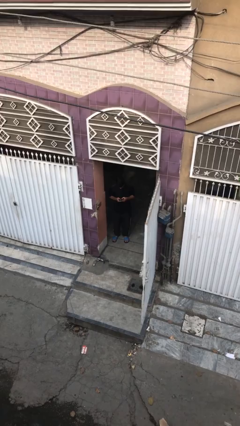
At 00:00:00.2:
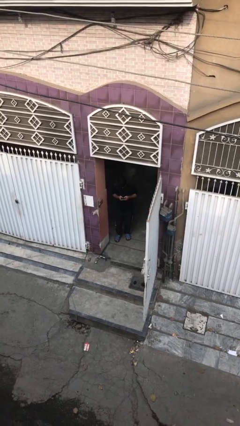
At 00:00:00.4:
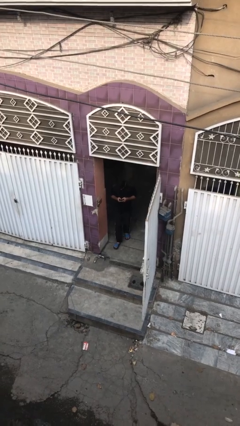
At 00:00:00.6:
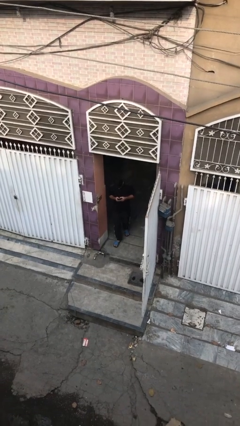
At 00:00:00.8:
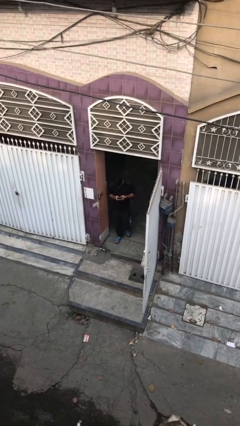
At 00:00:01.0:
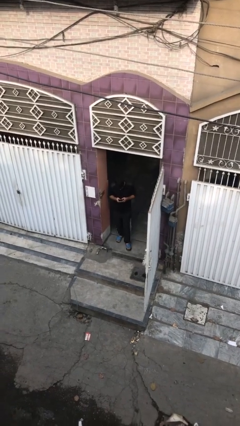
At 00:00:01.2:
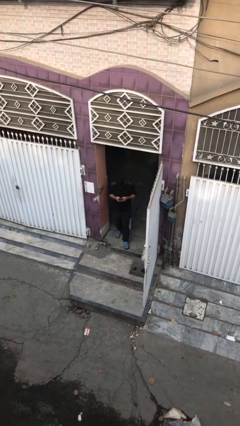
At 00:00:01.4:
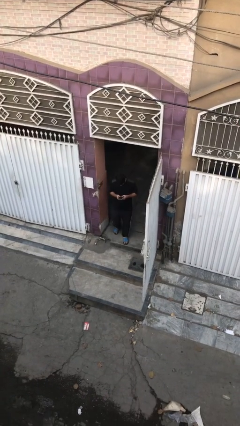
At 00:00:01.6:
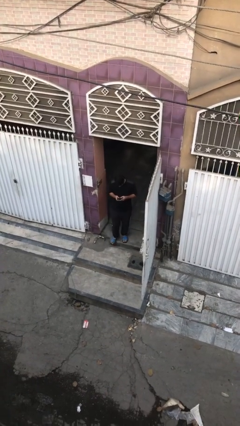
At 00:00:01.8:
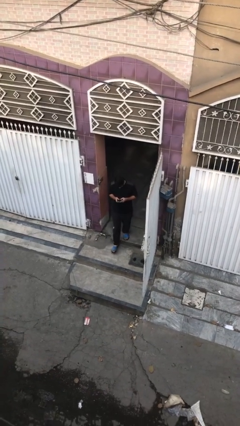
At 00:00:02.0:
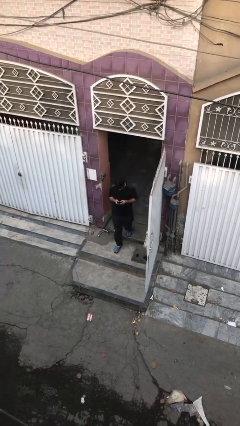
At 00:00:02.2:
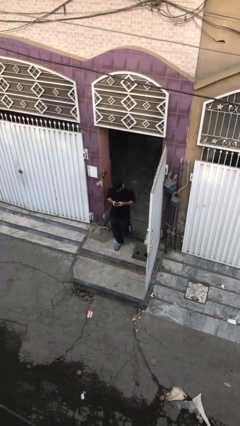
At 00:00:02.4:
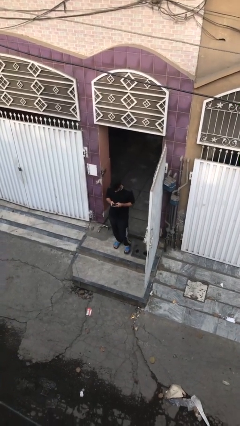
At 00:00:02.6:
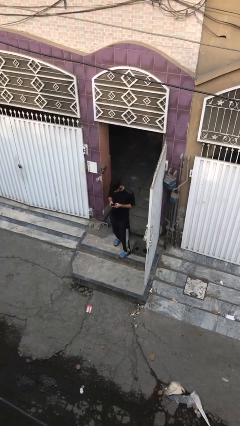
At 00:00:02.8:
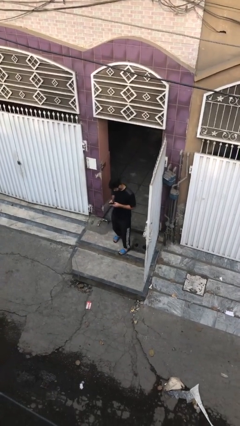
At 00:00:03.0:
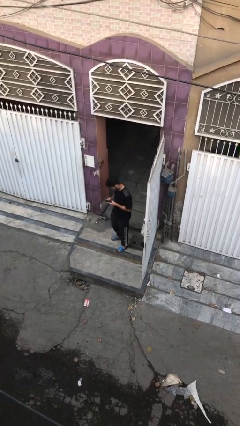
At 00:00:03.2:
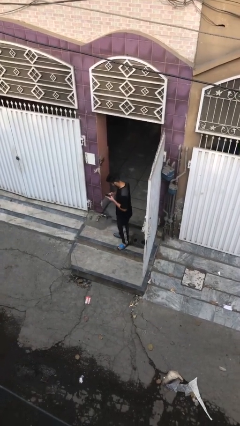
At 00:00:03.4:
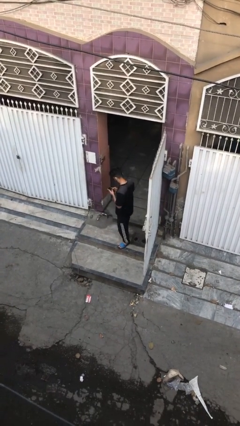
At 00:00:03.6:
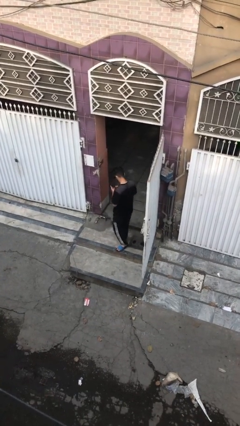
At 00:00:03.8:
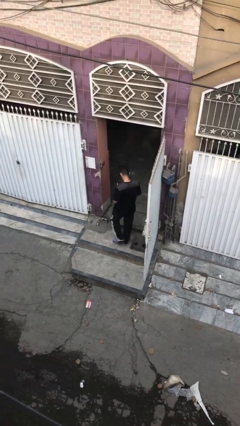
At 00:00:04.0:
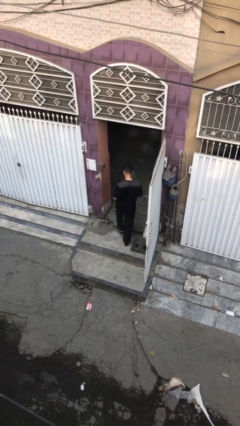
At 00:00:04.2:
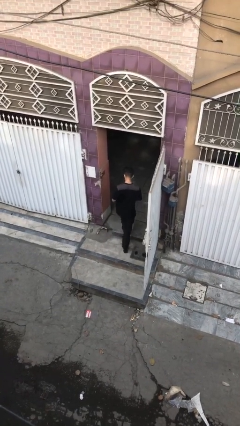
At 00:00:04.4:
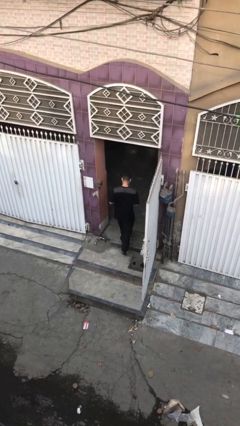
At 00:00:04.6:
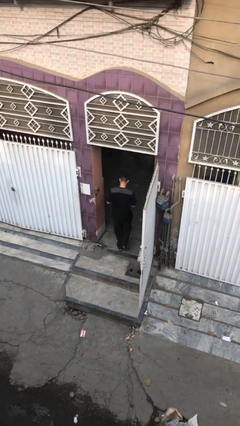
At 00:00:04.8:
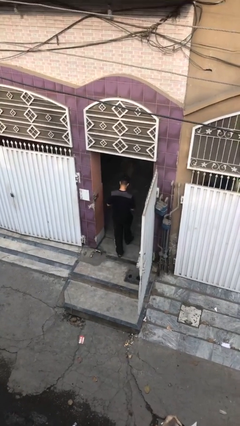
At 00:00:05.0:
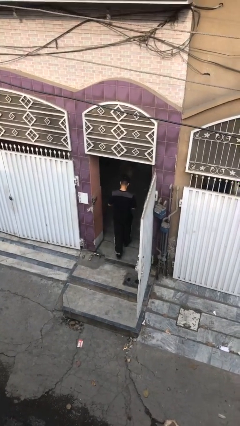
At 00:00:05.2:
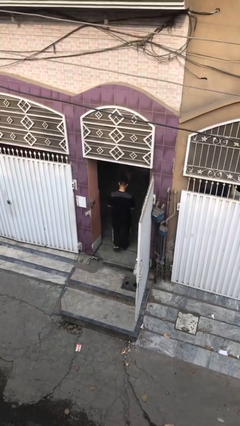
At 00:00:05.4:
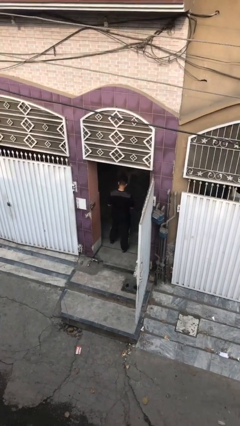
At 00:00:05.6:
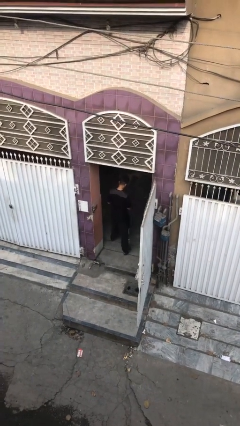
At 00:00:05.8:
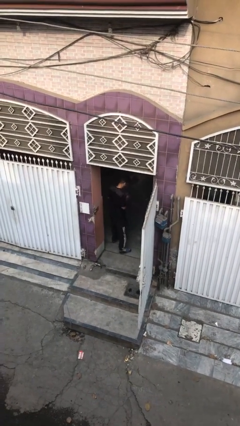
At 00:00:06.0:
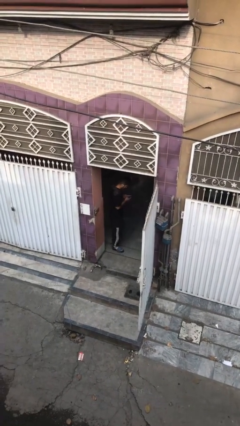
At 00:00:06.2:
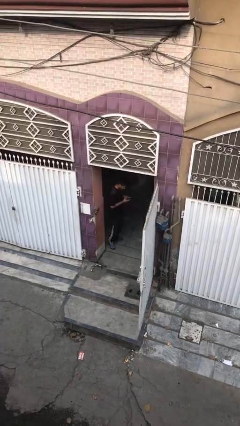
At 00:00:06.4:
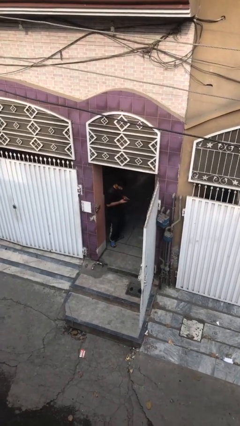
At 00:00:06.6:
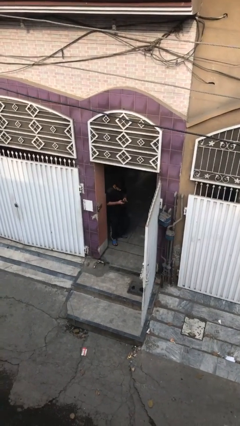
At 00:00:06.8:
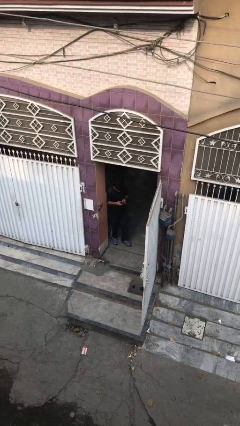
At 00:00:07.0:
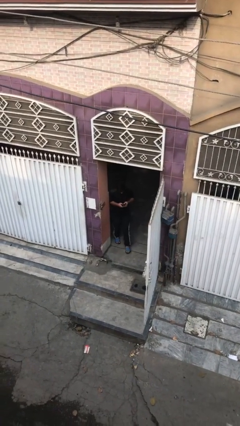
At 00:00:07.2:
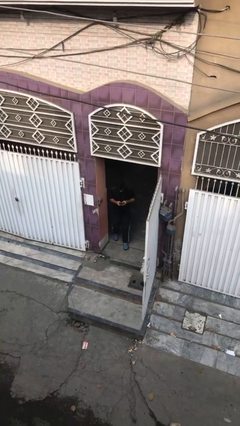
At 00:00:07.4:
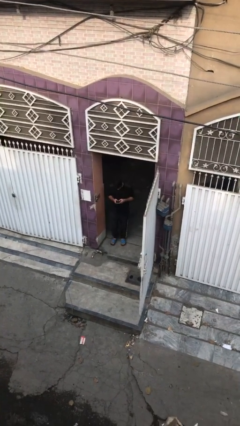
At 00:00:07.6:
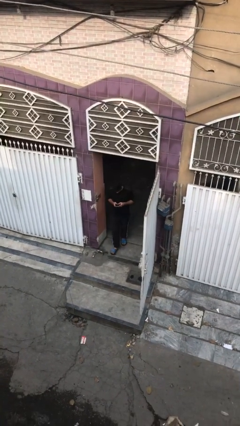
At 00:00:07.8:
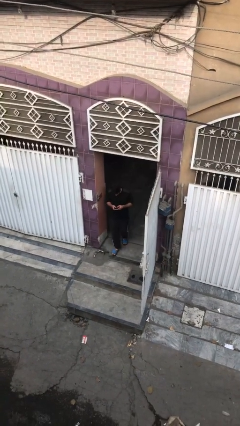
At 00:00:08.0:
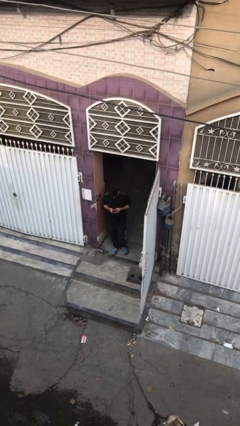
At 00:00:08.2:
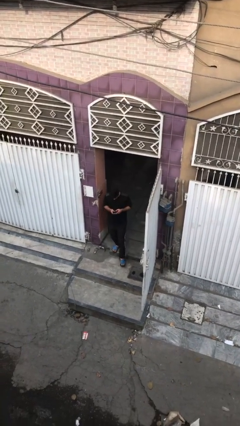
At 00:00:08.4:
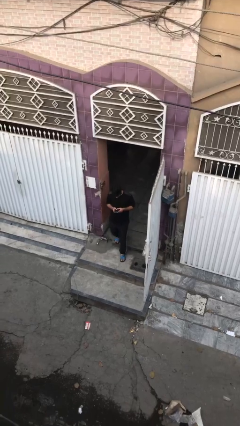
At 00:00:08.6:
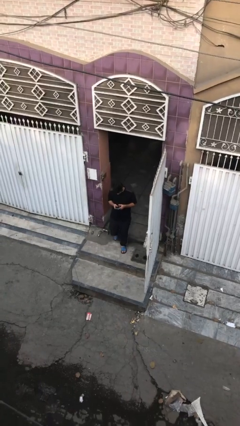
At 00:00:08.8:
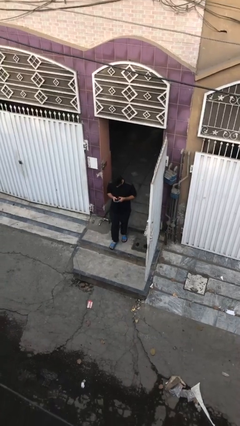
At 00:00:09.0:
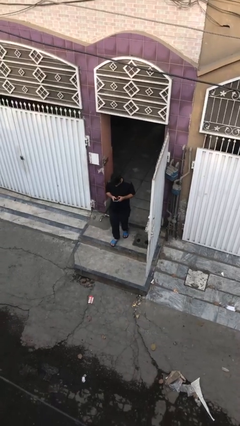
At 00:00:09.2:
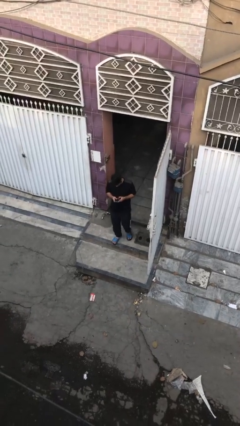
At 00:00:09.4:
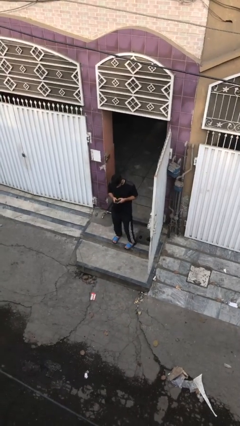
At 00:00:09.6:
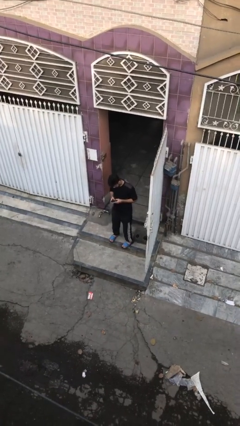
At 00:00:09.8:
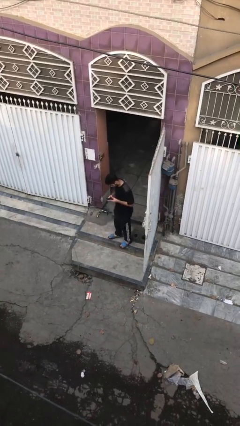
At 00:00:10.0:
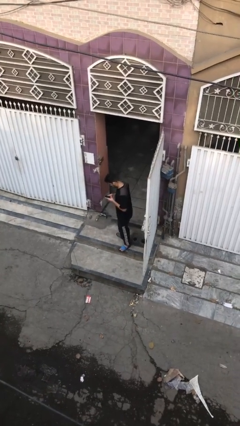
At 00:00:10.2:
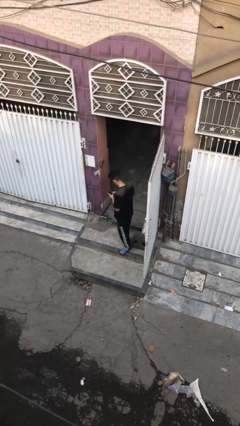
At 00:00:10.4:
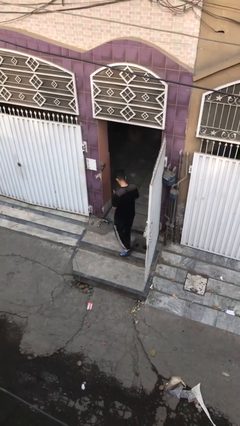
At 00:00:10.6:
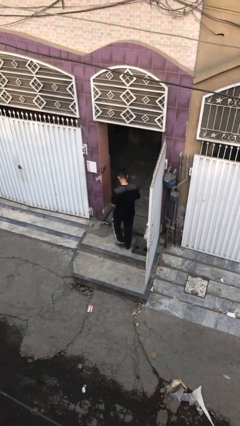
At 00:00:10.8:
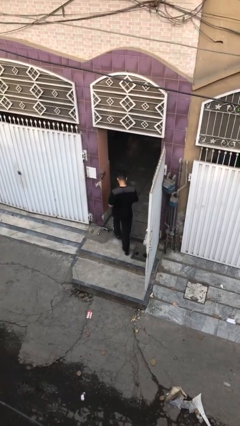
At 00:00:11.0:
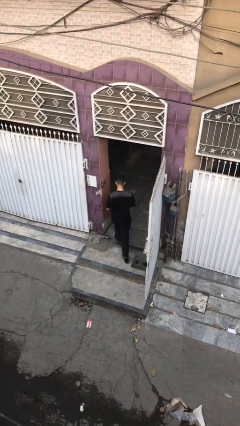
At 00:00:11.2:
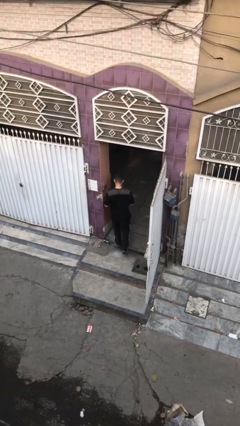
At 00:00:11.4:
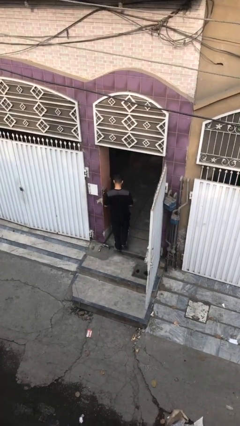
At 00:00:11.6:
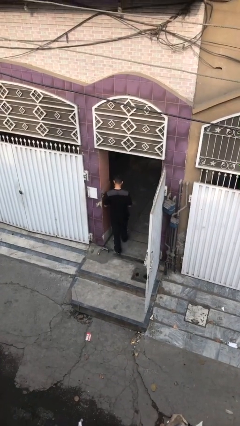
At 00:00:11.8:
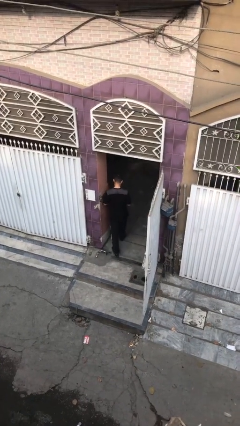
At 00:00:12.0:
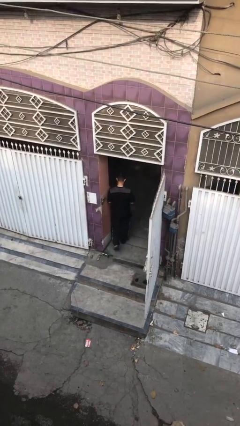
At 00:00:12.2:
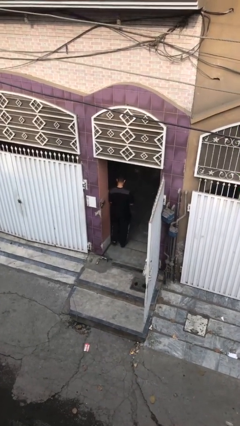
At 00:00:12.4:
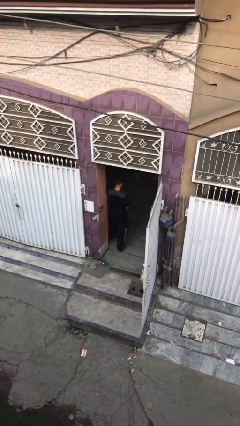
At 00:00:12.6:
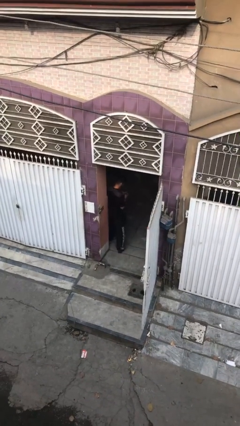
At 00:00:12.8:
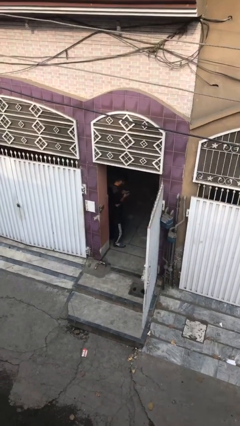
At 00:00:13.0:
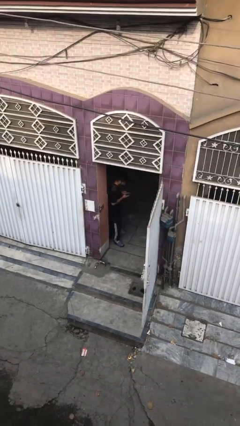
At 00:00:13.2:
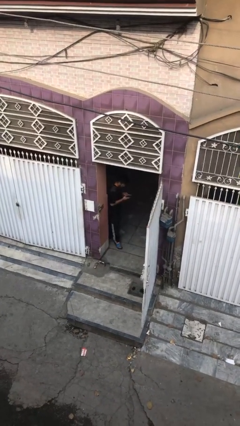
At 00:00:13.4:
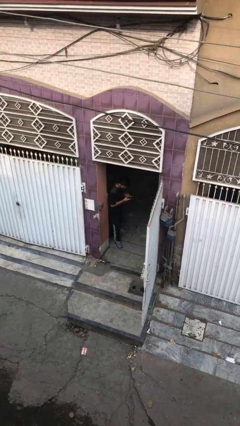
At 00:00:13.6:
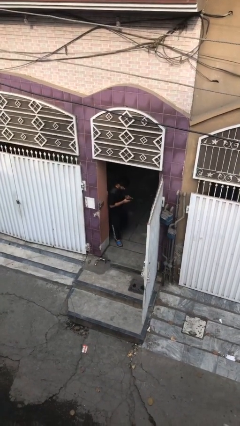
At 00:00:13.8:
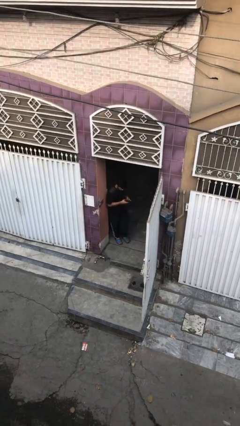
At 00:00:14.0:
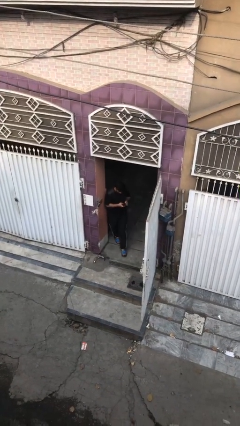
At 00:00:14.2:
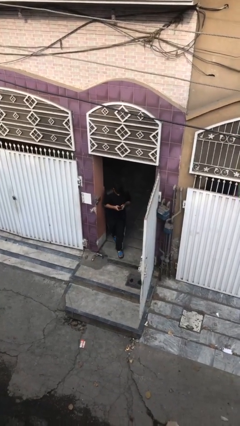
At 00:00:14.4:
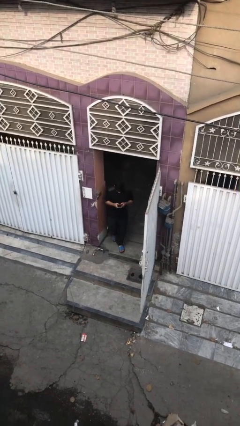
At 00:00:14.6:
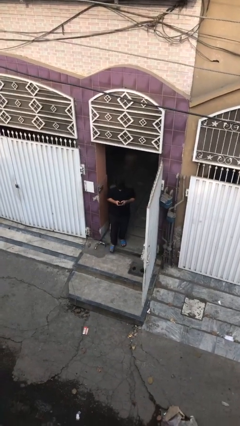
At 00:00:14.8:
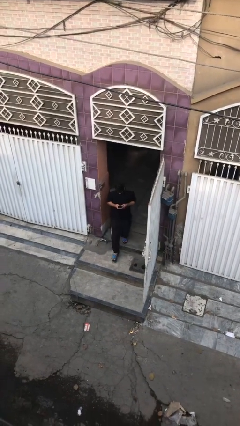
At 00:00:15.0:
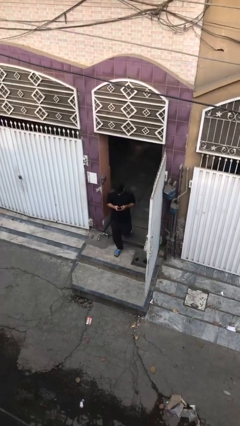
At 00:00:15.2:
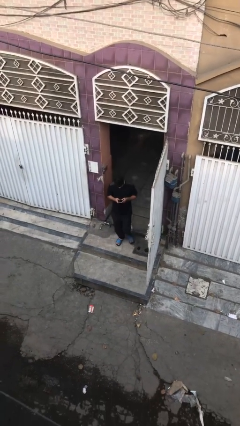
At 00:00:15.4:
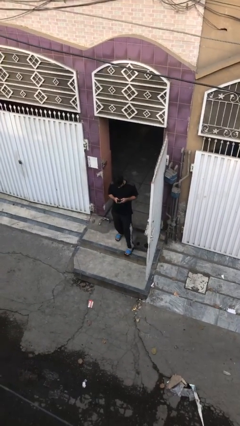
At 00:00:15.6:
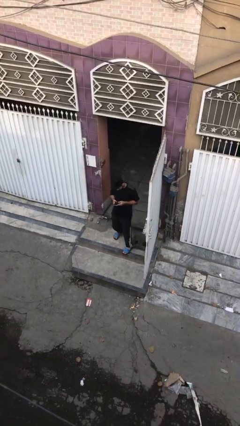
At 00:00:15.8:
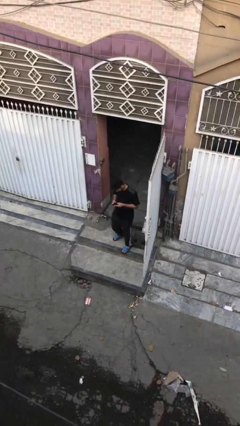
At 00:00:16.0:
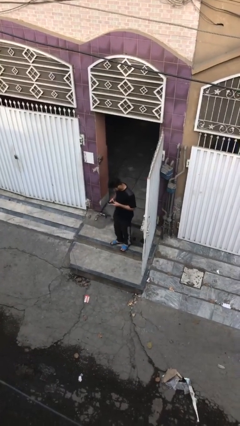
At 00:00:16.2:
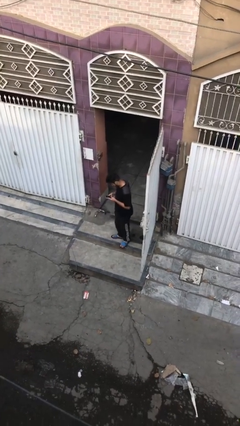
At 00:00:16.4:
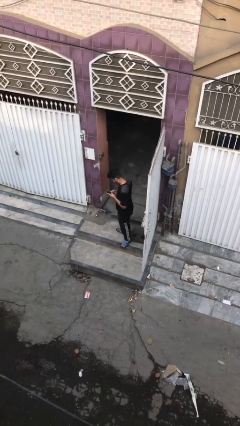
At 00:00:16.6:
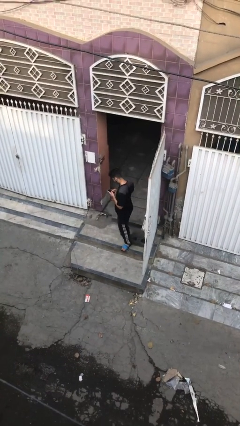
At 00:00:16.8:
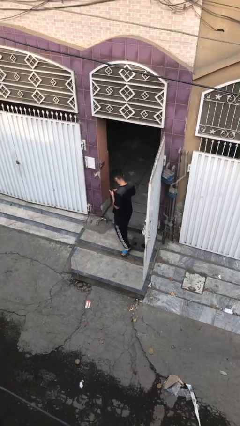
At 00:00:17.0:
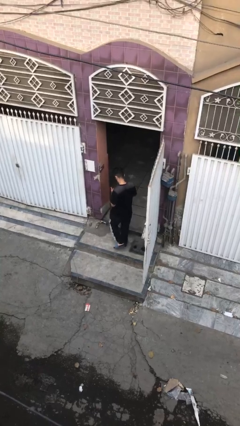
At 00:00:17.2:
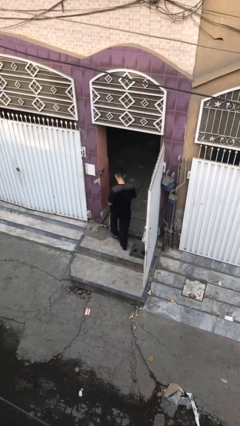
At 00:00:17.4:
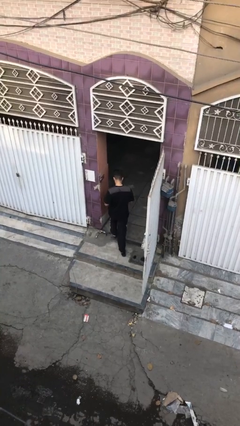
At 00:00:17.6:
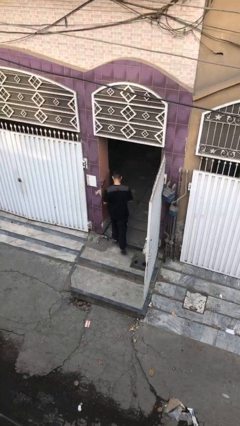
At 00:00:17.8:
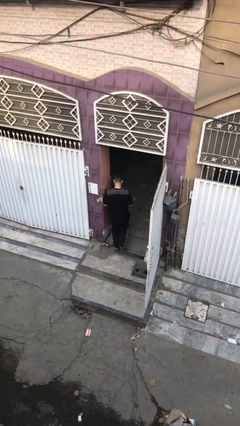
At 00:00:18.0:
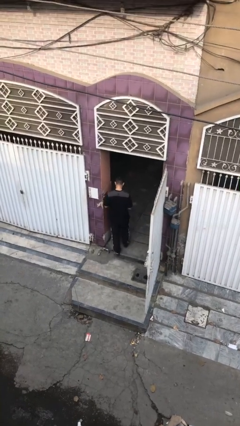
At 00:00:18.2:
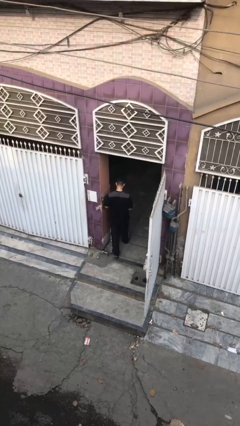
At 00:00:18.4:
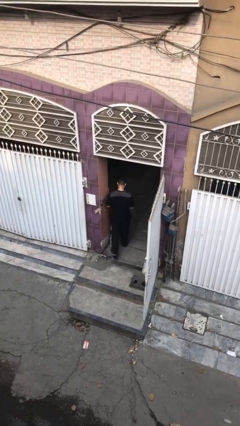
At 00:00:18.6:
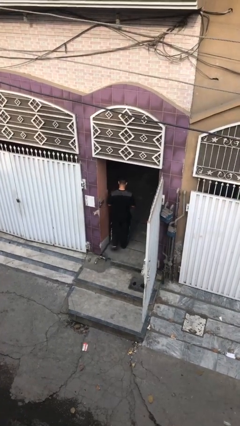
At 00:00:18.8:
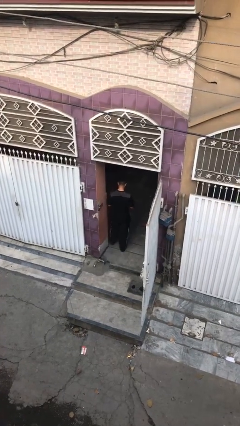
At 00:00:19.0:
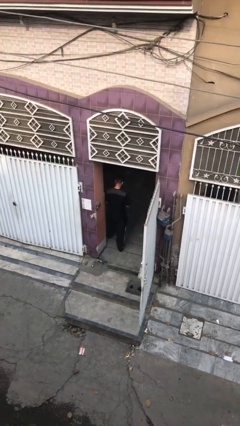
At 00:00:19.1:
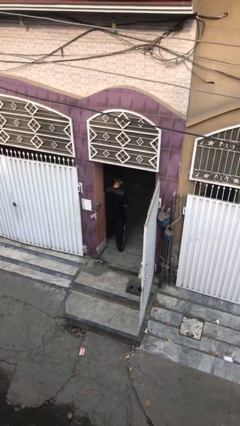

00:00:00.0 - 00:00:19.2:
person texts on phone
